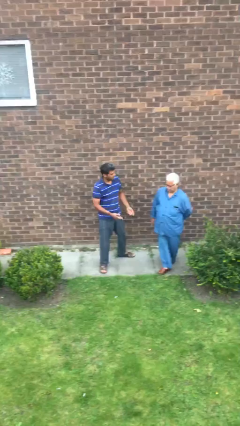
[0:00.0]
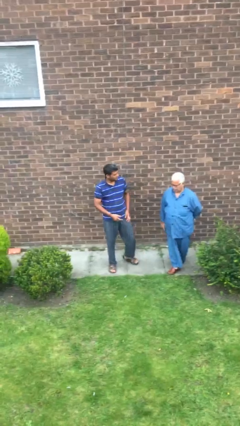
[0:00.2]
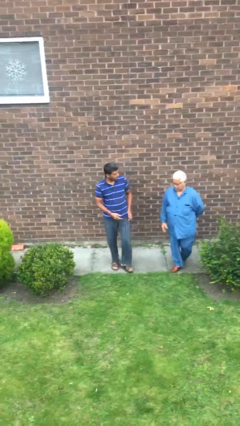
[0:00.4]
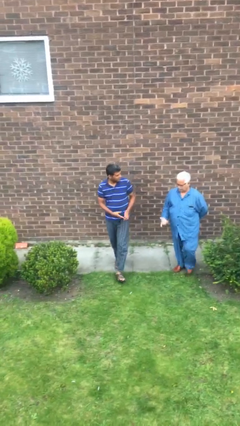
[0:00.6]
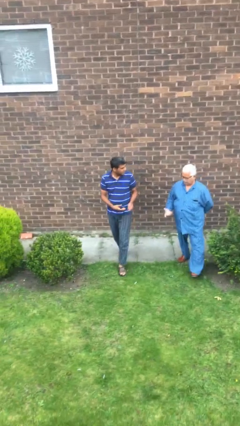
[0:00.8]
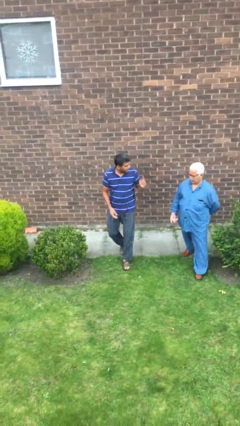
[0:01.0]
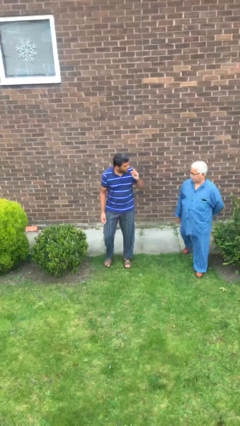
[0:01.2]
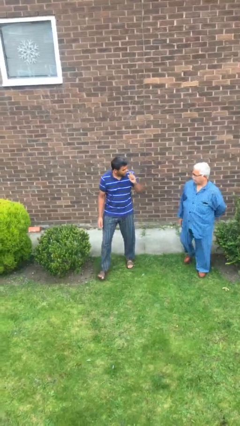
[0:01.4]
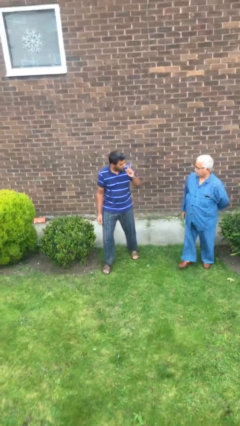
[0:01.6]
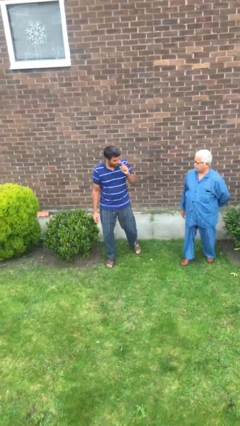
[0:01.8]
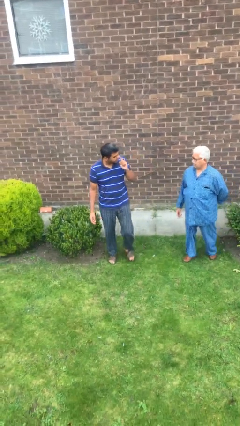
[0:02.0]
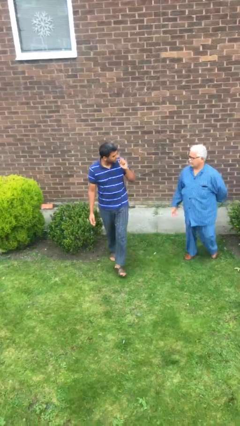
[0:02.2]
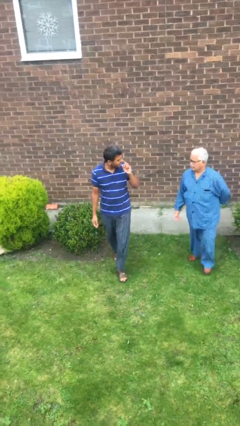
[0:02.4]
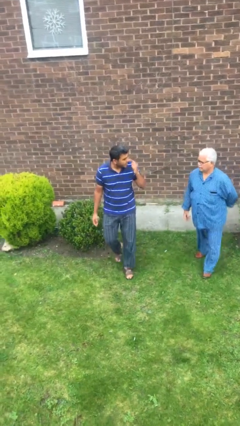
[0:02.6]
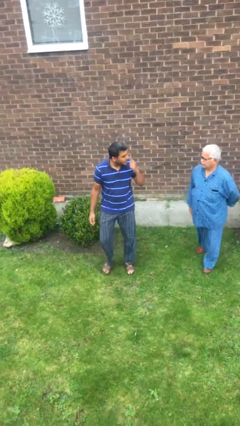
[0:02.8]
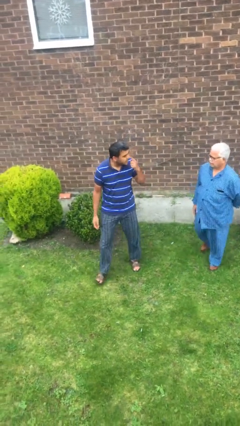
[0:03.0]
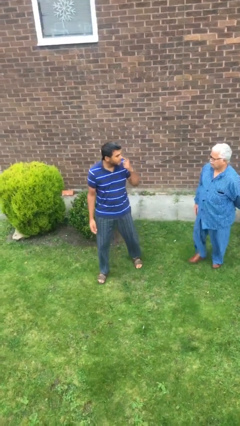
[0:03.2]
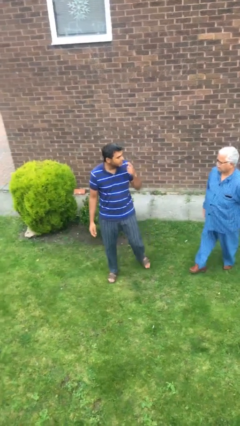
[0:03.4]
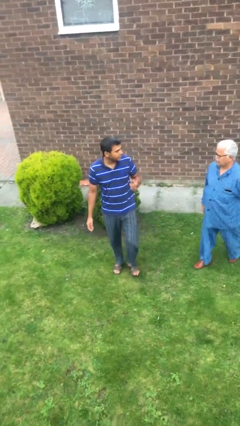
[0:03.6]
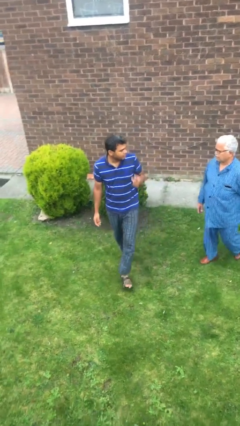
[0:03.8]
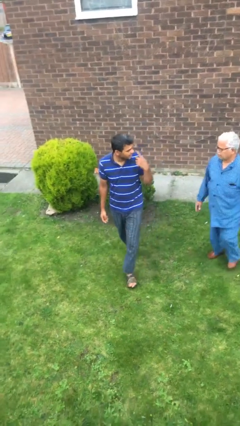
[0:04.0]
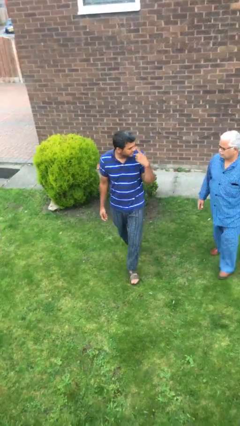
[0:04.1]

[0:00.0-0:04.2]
person talks to person

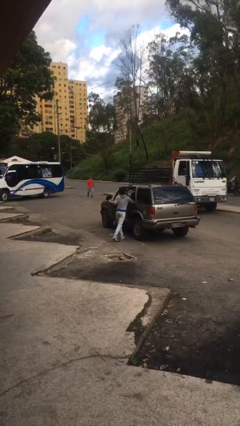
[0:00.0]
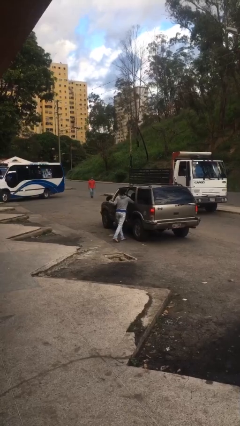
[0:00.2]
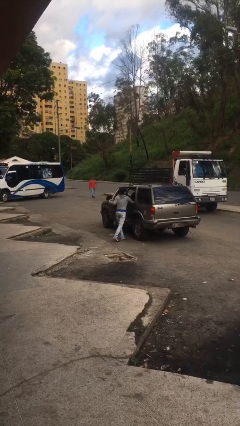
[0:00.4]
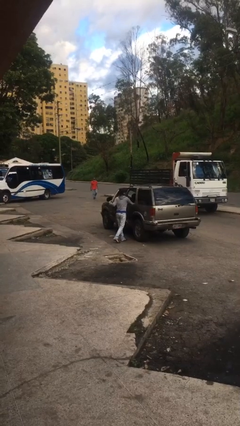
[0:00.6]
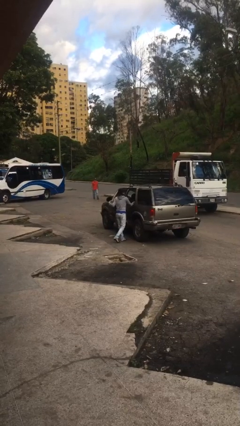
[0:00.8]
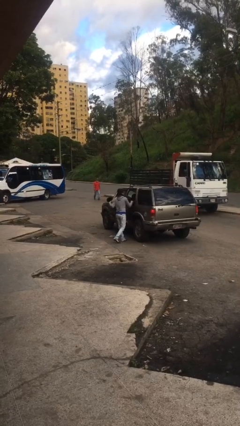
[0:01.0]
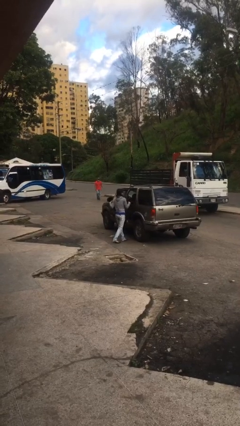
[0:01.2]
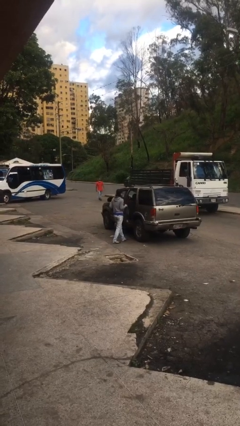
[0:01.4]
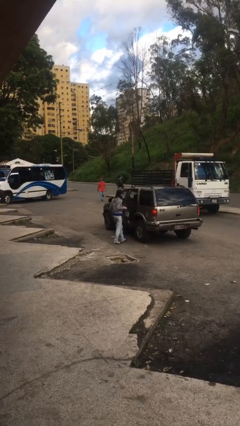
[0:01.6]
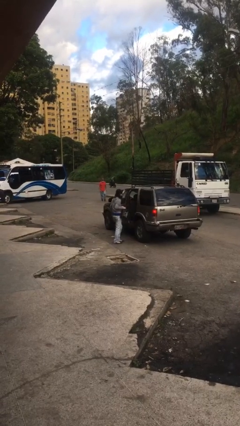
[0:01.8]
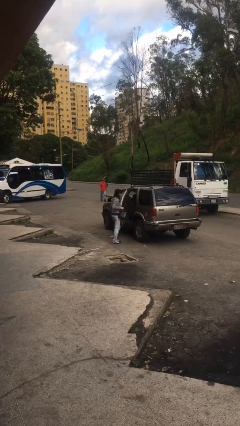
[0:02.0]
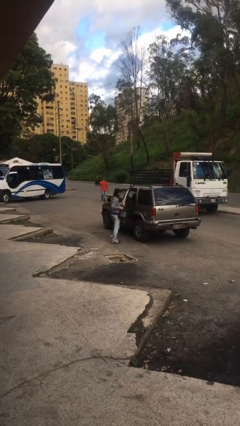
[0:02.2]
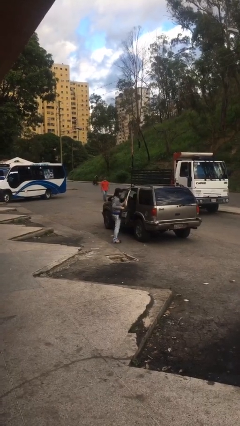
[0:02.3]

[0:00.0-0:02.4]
person unloads car

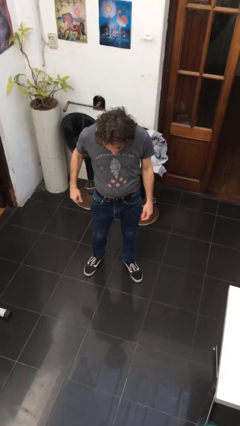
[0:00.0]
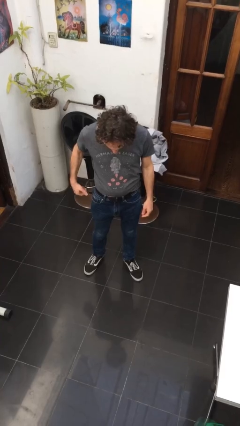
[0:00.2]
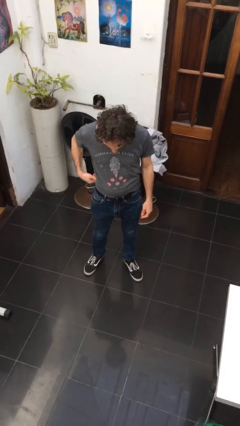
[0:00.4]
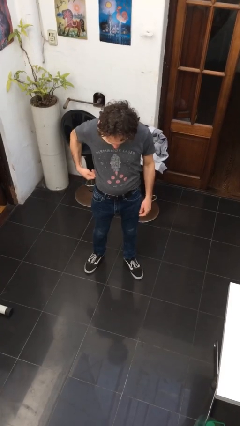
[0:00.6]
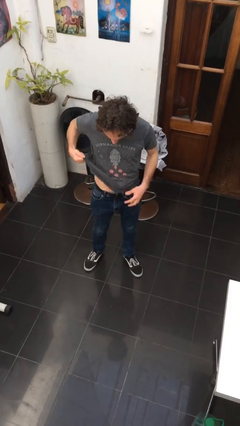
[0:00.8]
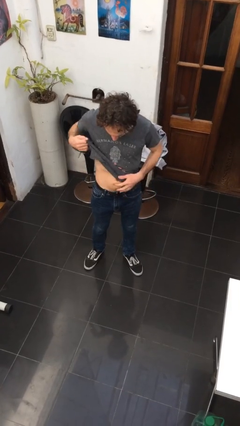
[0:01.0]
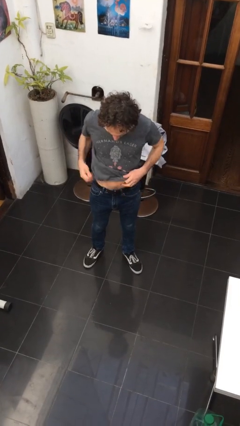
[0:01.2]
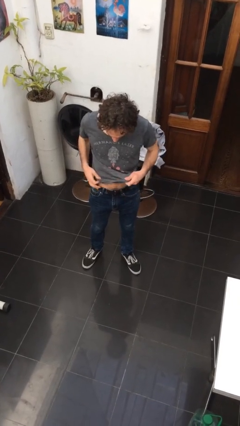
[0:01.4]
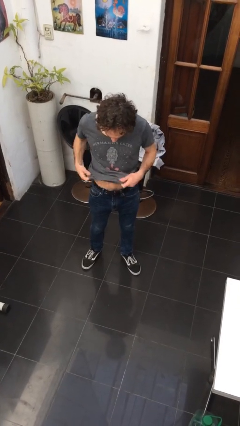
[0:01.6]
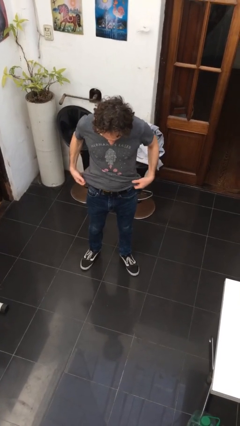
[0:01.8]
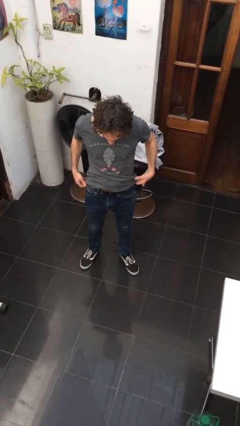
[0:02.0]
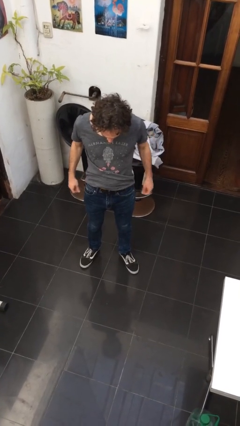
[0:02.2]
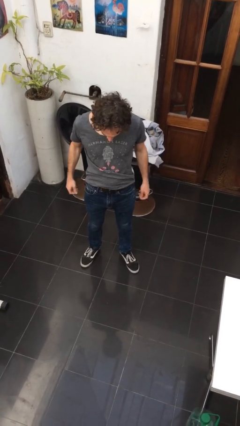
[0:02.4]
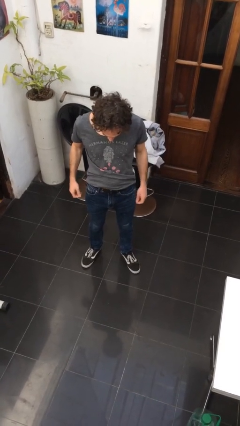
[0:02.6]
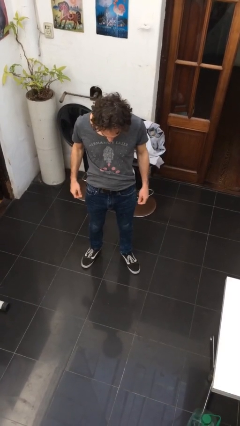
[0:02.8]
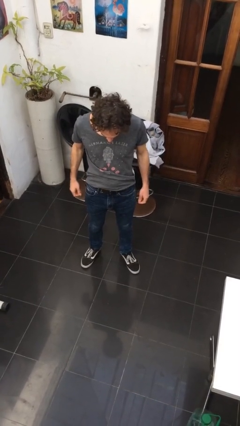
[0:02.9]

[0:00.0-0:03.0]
person untucks shirt

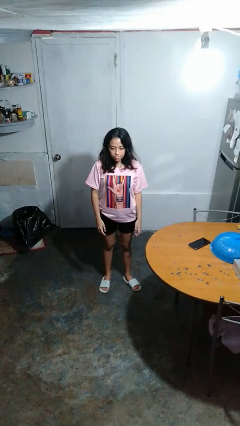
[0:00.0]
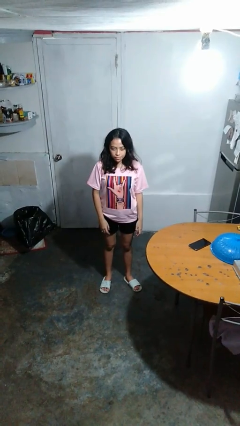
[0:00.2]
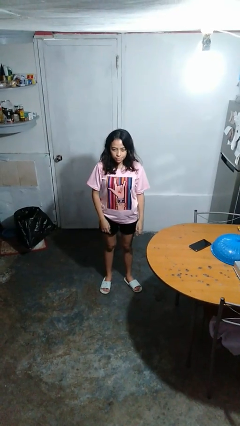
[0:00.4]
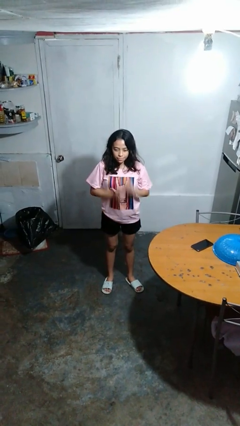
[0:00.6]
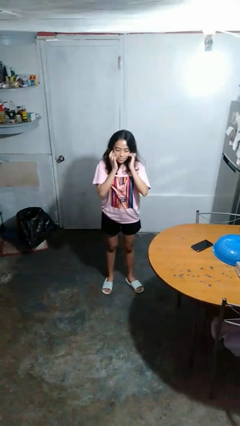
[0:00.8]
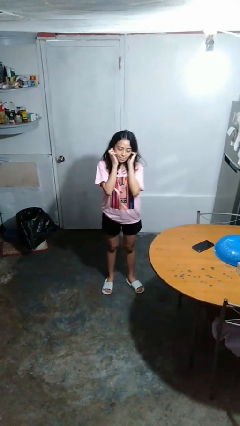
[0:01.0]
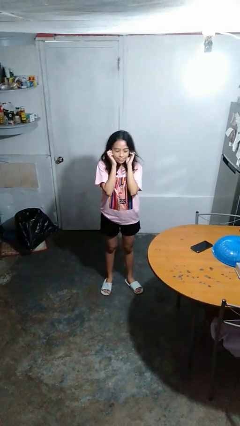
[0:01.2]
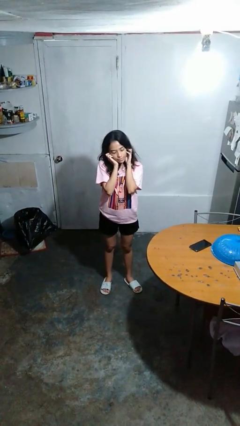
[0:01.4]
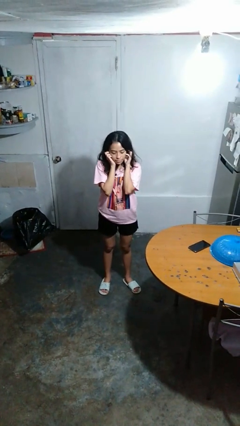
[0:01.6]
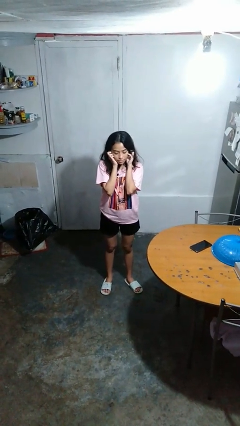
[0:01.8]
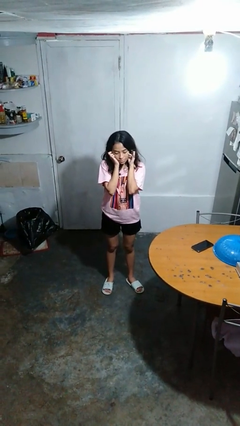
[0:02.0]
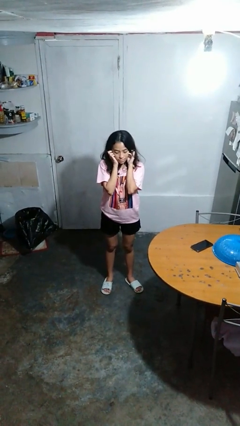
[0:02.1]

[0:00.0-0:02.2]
person puts fingers in ear

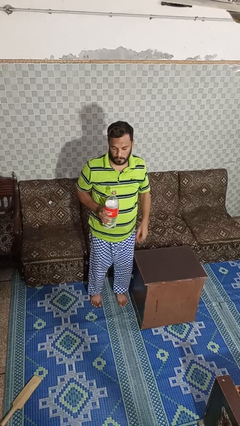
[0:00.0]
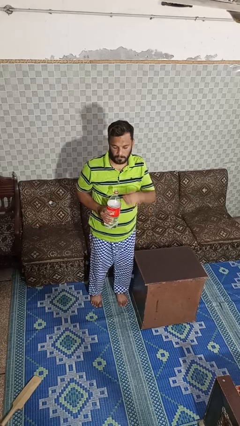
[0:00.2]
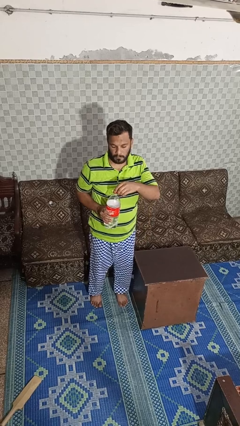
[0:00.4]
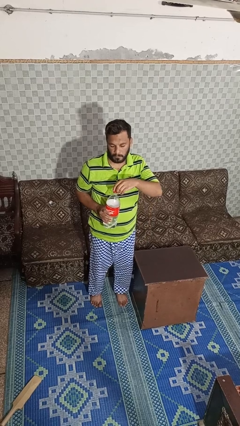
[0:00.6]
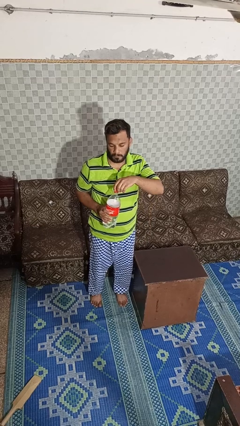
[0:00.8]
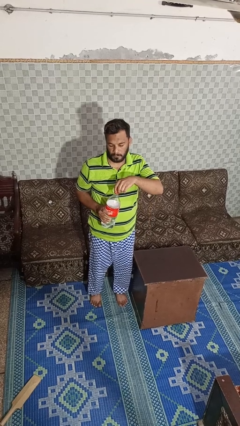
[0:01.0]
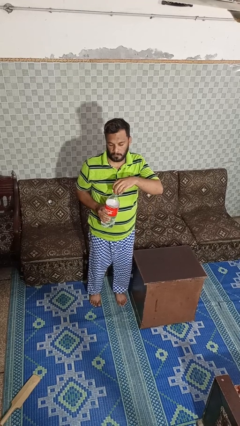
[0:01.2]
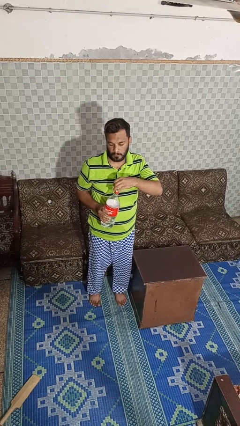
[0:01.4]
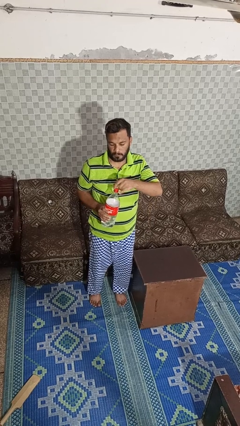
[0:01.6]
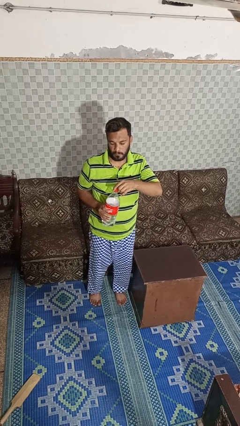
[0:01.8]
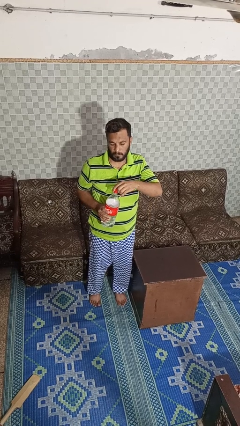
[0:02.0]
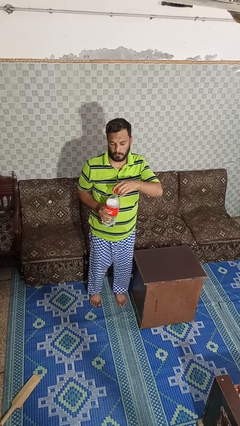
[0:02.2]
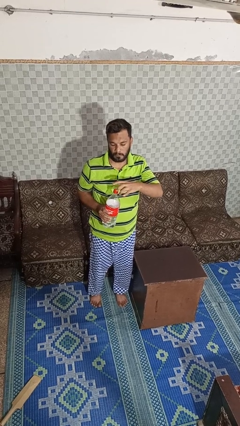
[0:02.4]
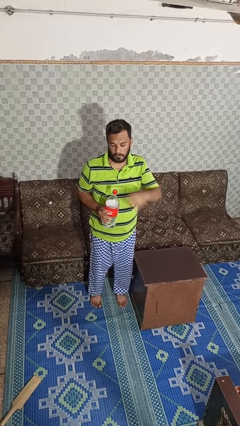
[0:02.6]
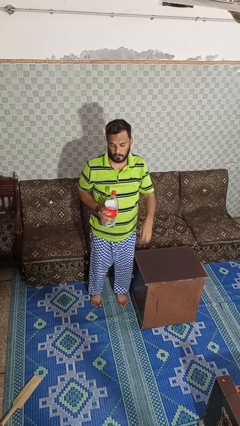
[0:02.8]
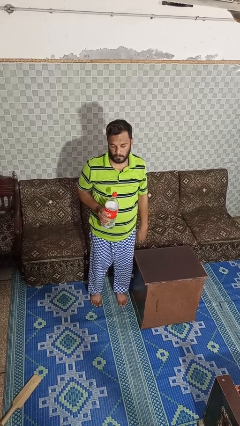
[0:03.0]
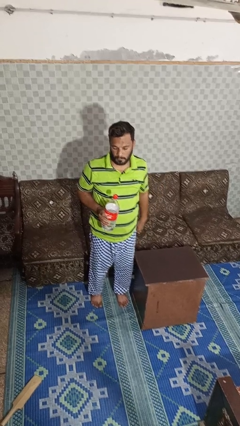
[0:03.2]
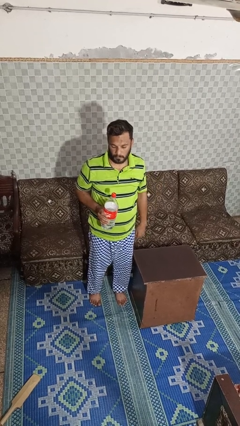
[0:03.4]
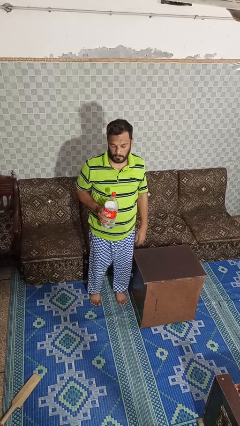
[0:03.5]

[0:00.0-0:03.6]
person screws lid to bottle

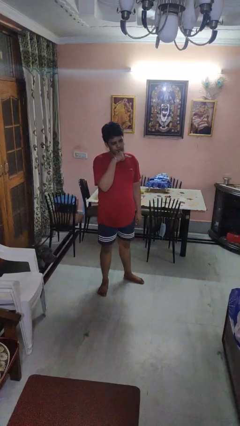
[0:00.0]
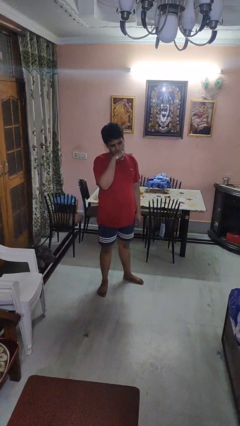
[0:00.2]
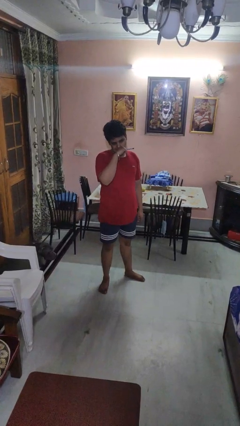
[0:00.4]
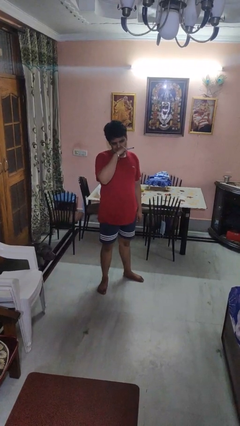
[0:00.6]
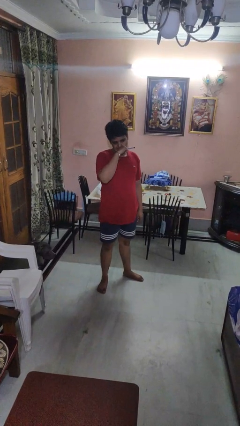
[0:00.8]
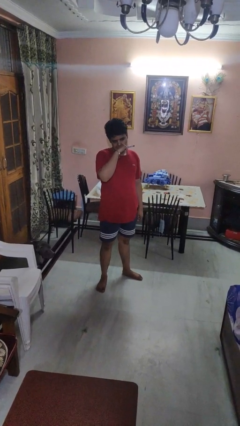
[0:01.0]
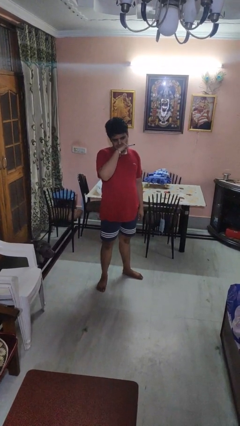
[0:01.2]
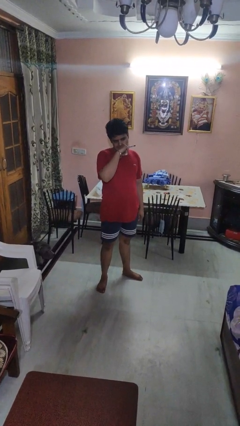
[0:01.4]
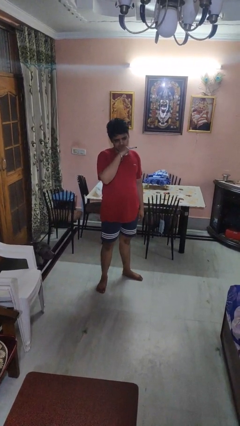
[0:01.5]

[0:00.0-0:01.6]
person vapes

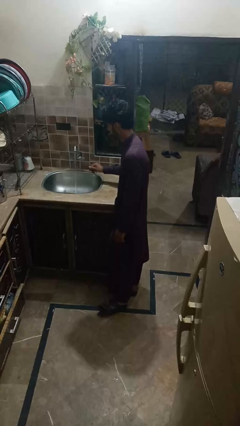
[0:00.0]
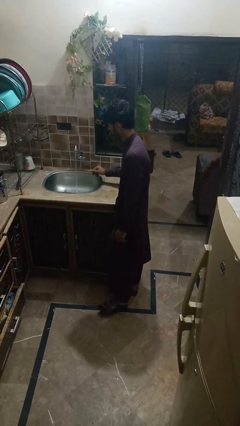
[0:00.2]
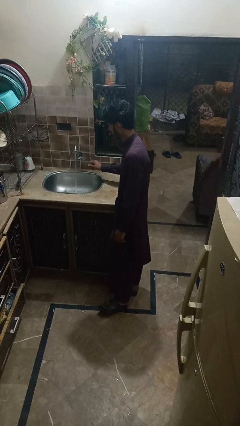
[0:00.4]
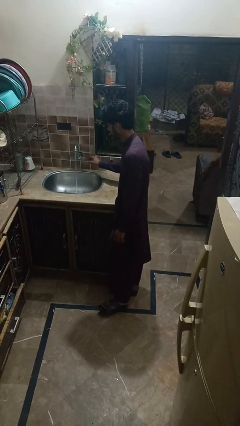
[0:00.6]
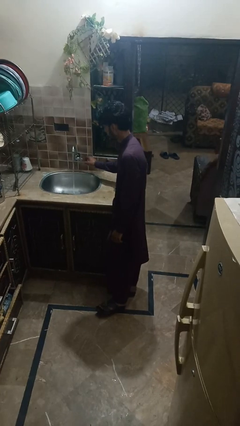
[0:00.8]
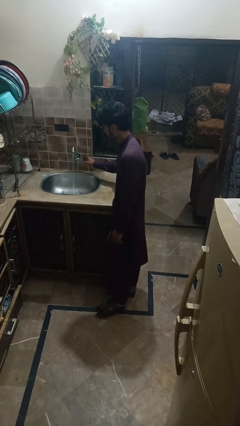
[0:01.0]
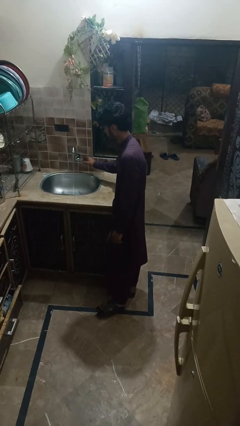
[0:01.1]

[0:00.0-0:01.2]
person opens dishwasher
